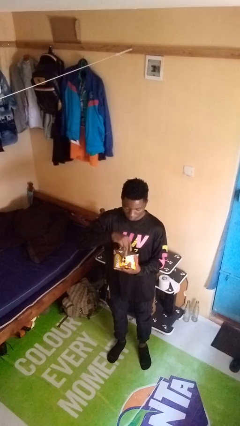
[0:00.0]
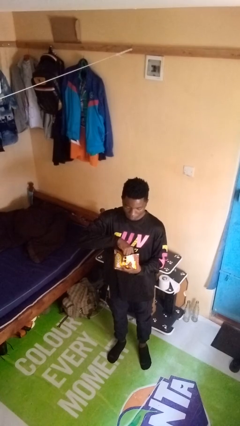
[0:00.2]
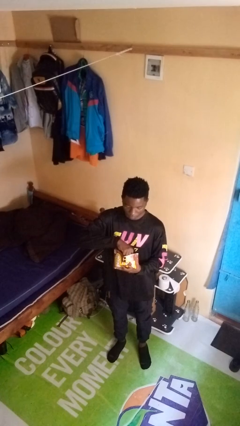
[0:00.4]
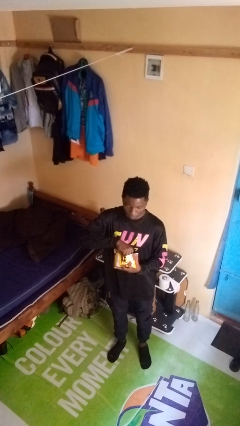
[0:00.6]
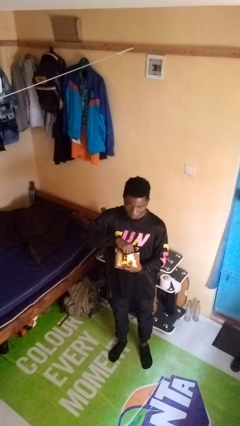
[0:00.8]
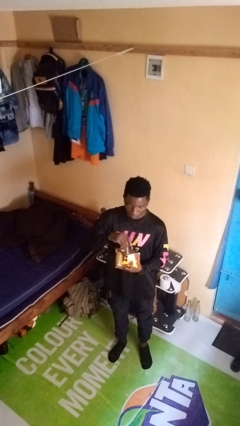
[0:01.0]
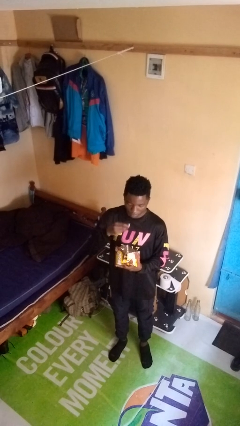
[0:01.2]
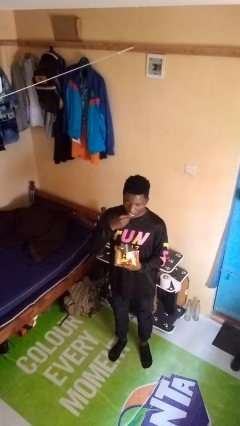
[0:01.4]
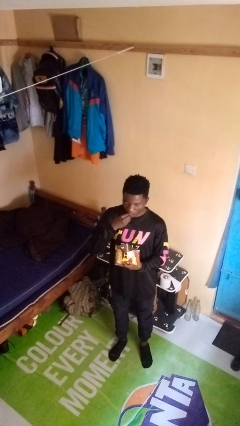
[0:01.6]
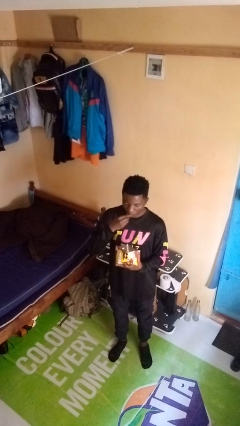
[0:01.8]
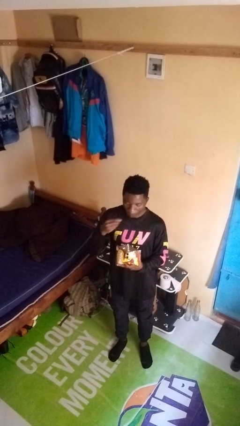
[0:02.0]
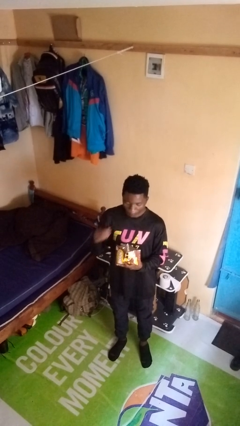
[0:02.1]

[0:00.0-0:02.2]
person eats snack from bag

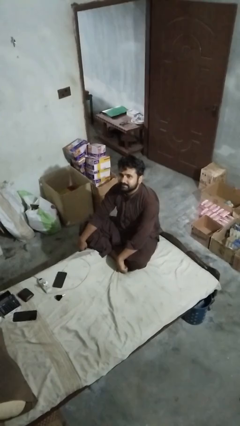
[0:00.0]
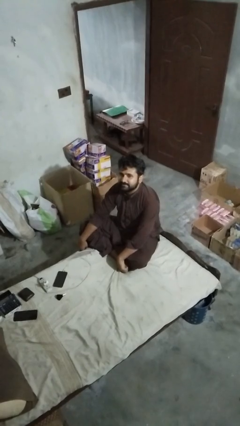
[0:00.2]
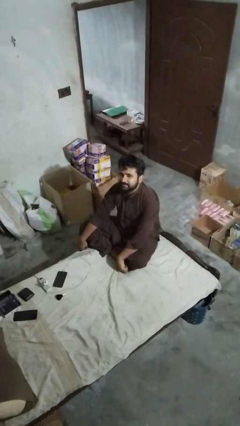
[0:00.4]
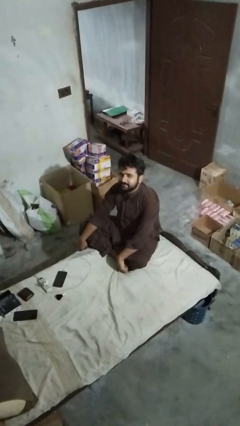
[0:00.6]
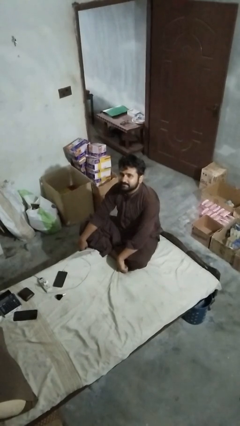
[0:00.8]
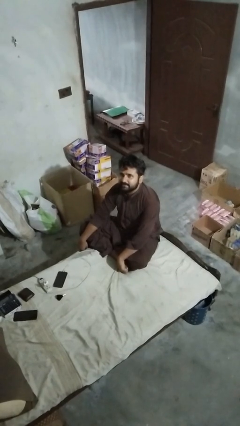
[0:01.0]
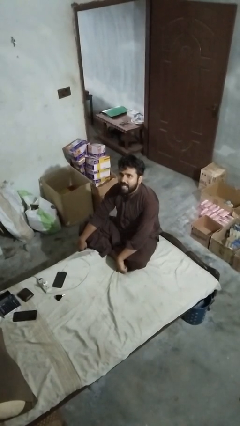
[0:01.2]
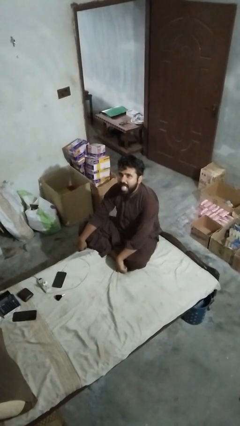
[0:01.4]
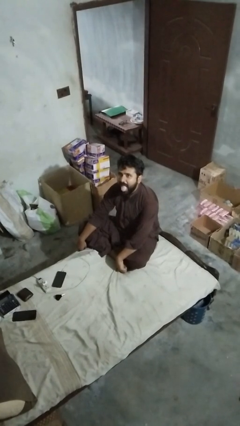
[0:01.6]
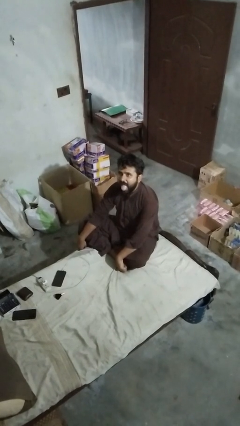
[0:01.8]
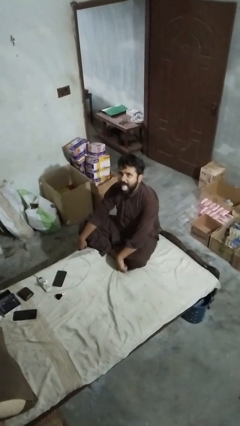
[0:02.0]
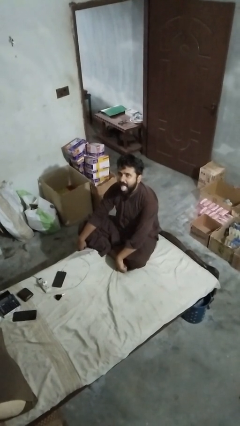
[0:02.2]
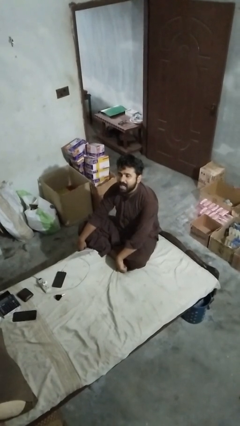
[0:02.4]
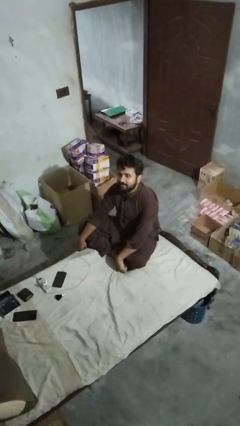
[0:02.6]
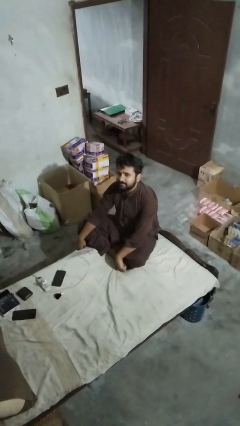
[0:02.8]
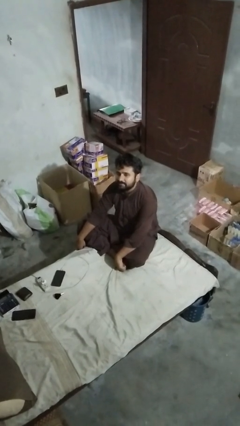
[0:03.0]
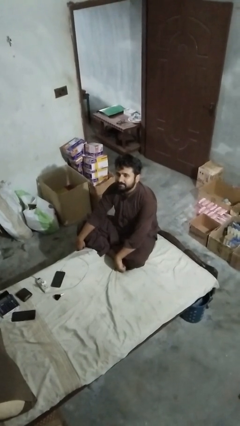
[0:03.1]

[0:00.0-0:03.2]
person sticks out tongue

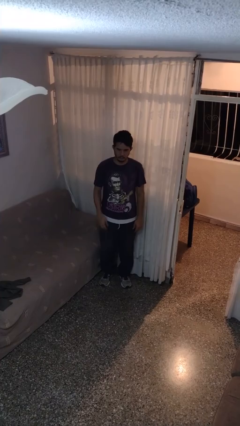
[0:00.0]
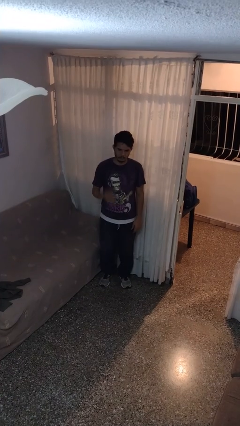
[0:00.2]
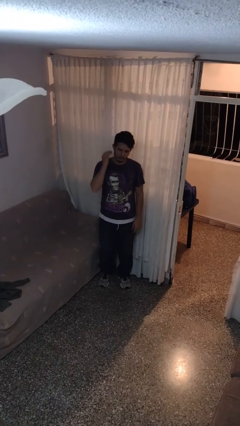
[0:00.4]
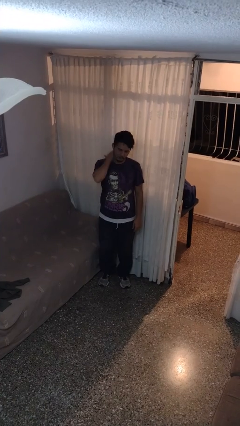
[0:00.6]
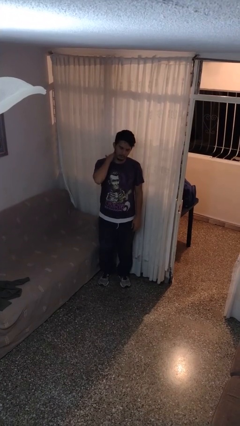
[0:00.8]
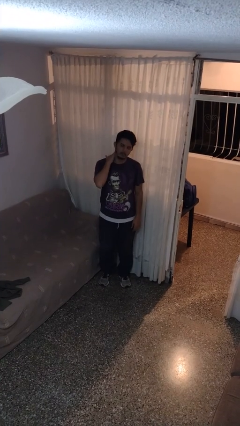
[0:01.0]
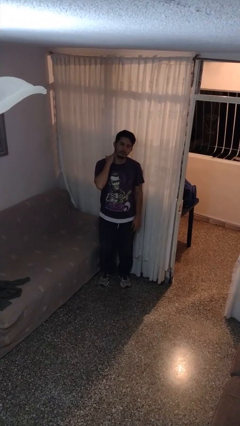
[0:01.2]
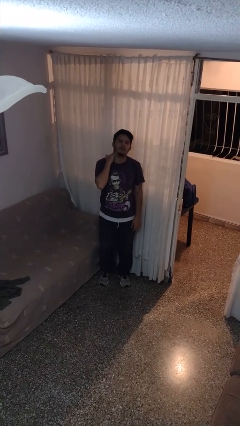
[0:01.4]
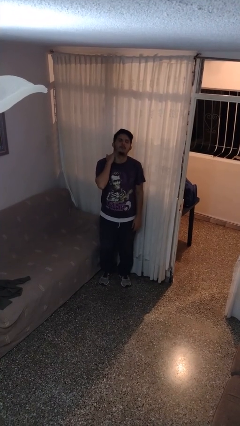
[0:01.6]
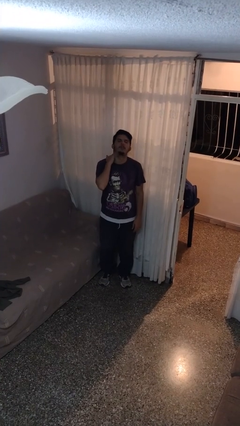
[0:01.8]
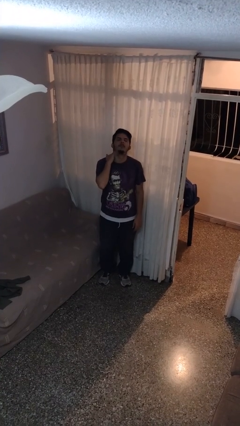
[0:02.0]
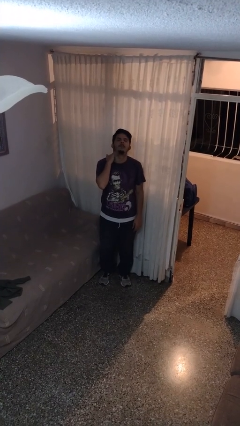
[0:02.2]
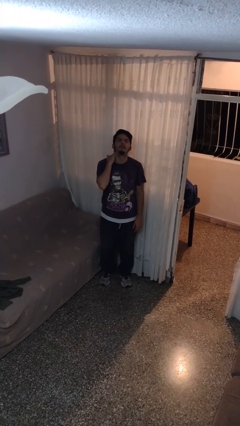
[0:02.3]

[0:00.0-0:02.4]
person rubs neck

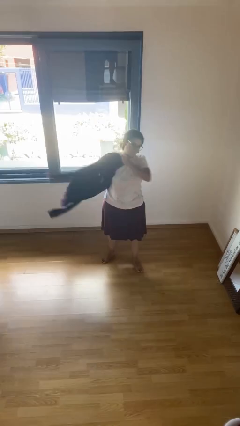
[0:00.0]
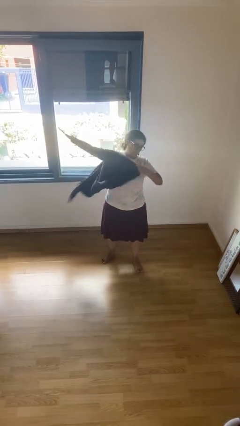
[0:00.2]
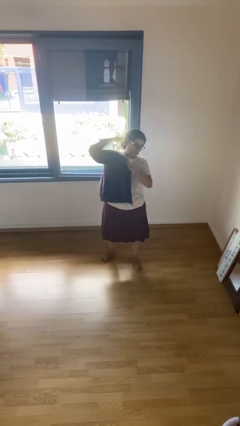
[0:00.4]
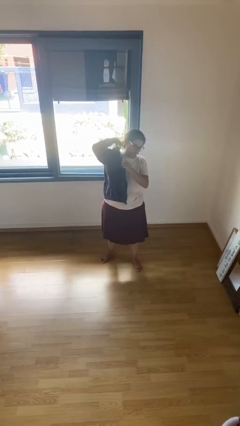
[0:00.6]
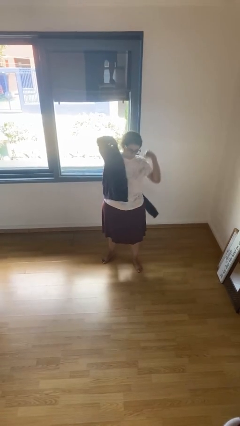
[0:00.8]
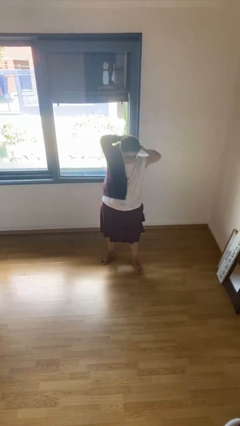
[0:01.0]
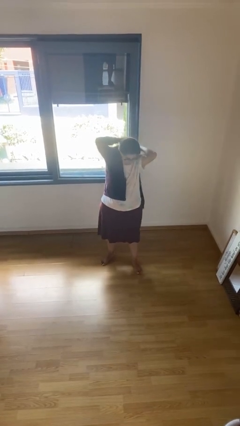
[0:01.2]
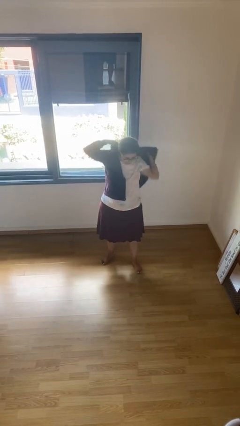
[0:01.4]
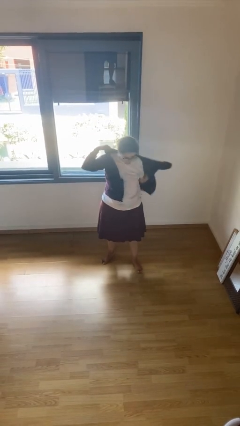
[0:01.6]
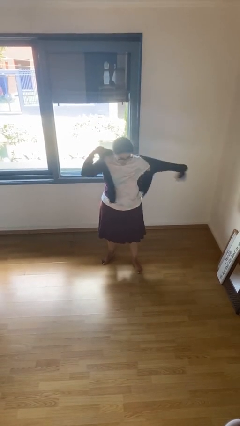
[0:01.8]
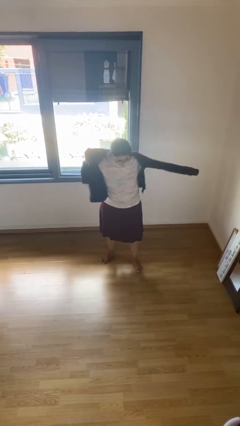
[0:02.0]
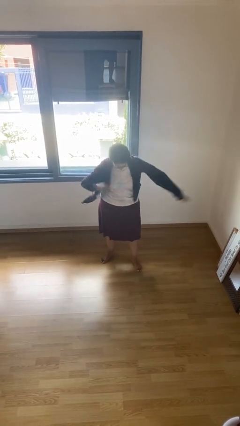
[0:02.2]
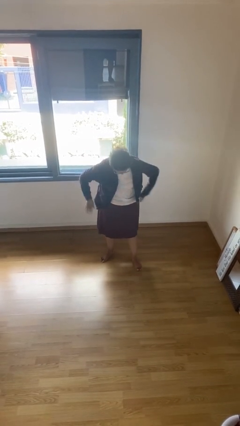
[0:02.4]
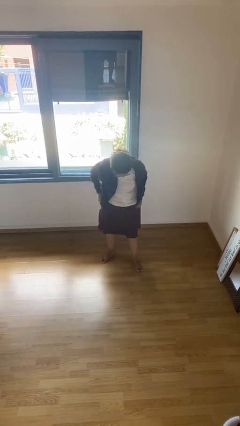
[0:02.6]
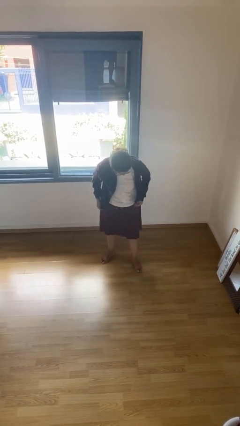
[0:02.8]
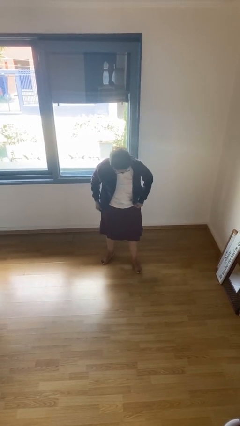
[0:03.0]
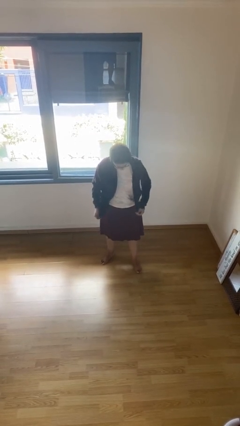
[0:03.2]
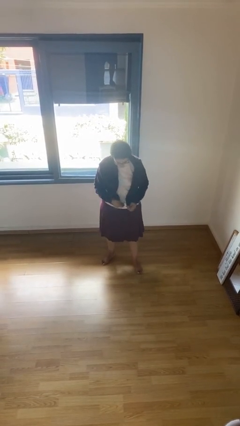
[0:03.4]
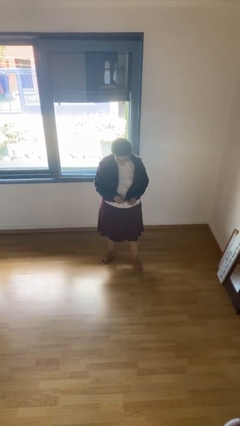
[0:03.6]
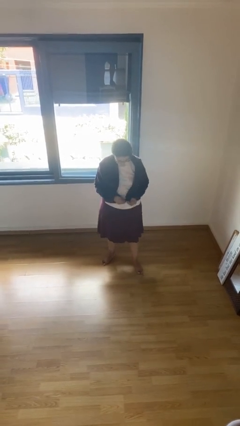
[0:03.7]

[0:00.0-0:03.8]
person puts on jacket

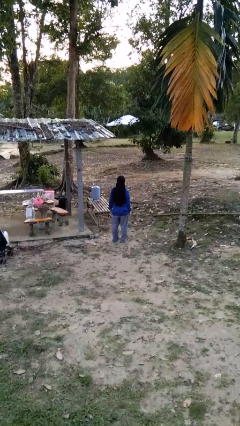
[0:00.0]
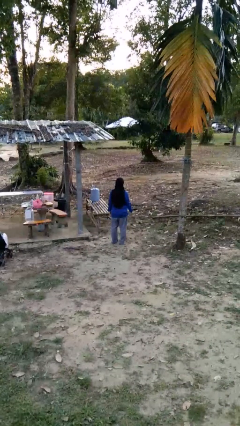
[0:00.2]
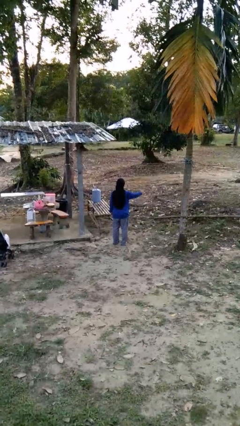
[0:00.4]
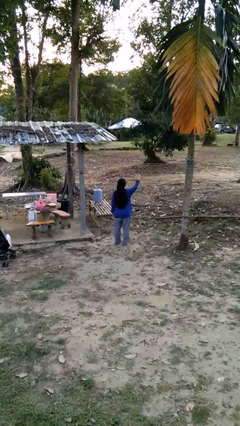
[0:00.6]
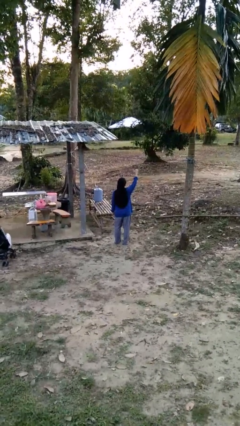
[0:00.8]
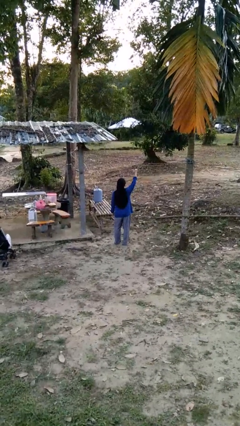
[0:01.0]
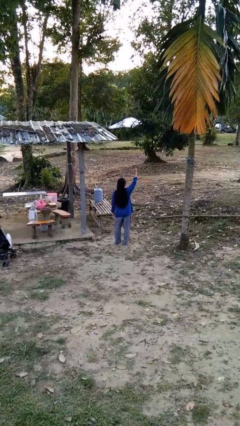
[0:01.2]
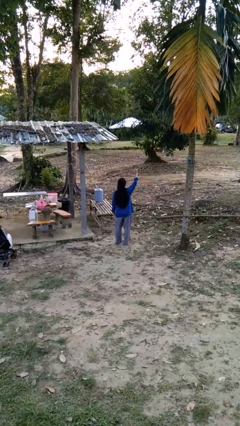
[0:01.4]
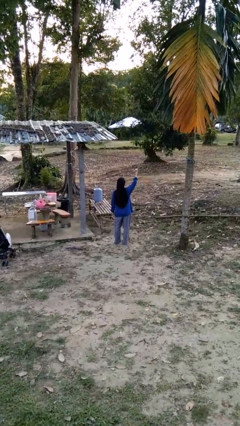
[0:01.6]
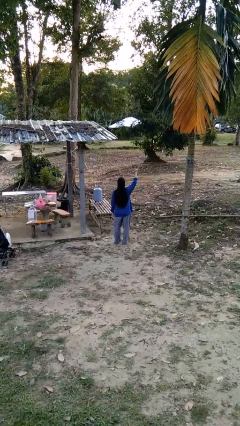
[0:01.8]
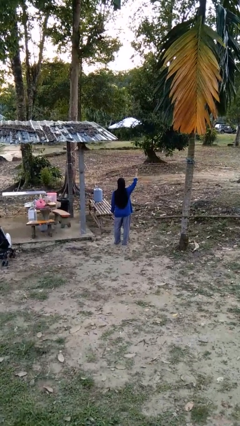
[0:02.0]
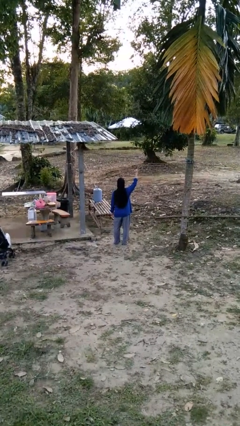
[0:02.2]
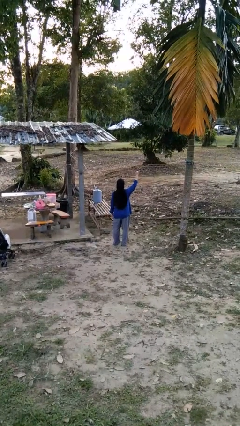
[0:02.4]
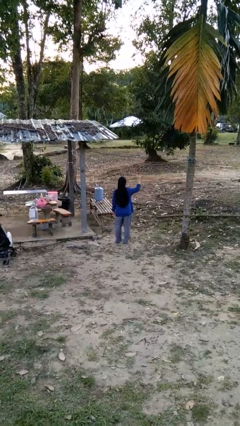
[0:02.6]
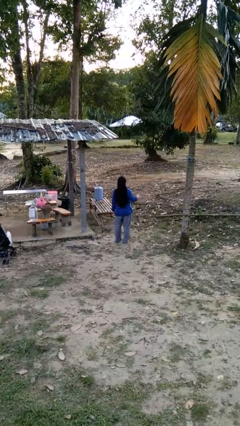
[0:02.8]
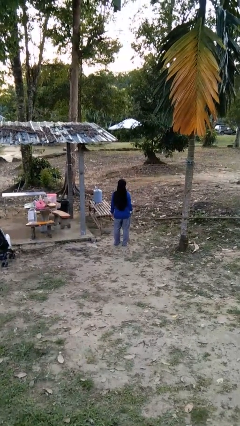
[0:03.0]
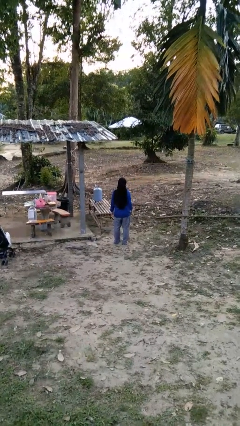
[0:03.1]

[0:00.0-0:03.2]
person gestures hang loose

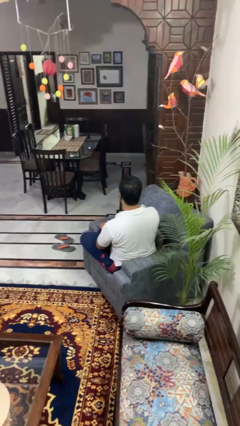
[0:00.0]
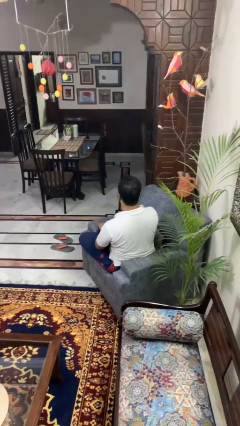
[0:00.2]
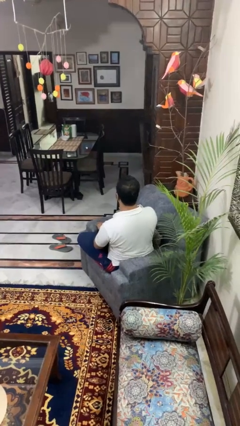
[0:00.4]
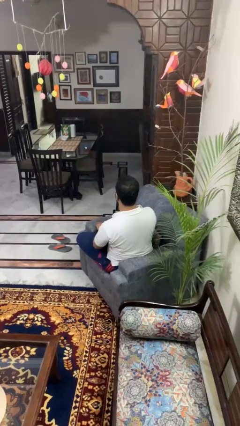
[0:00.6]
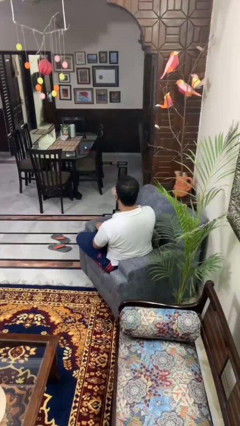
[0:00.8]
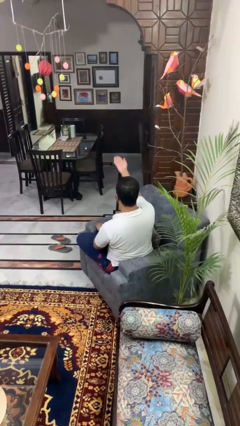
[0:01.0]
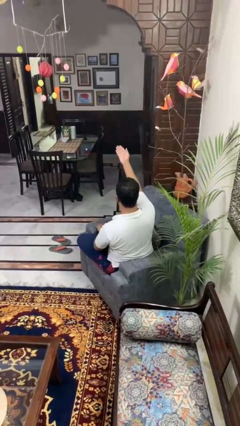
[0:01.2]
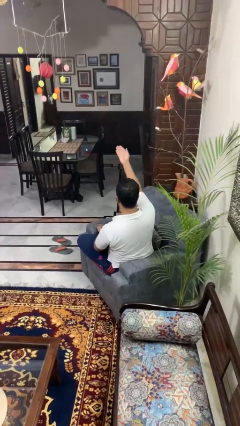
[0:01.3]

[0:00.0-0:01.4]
person gestures swipe up

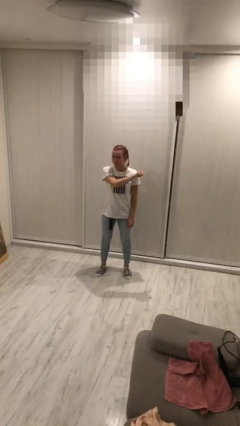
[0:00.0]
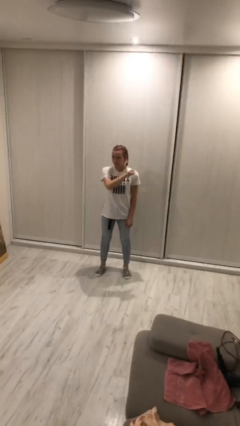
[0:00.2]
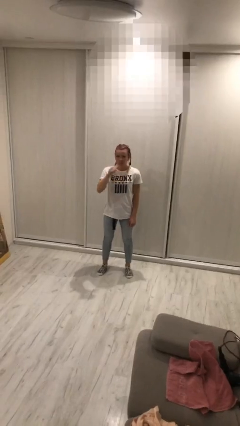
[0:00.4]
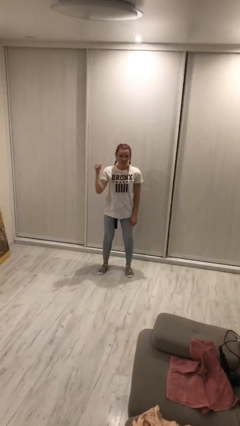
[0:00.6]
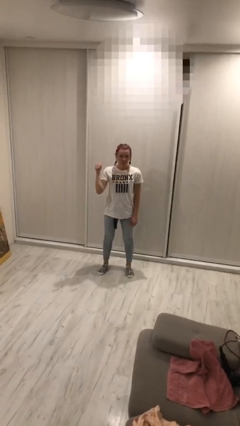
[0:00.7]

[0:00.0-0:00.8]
person gestures cut

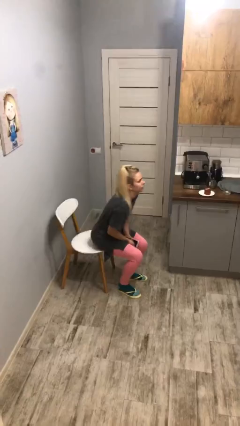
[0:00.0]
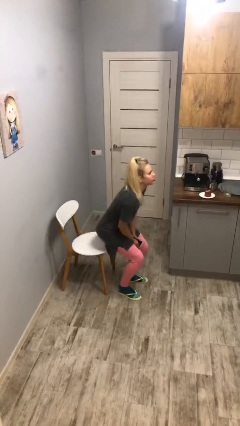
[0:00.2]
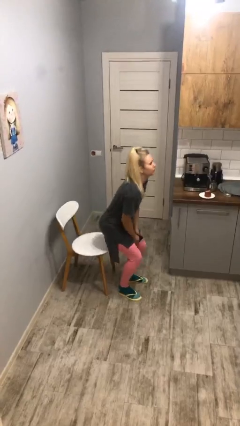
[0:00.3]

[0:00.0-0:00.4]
person stands up
